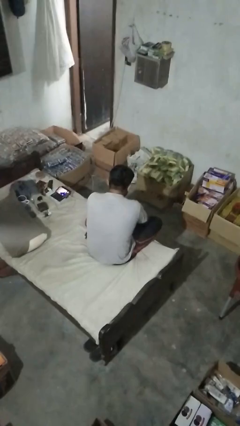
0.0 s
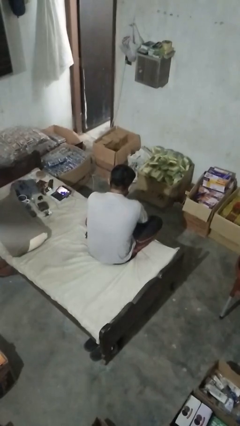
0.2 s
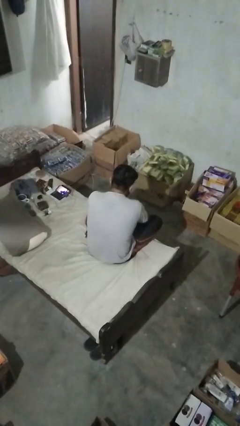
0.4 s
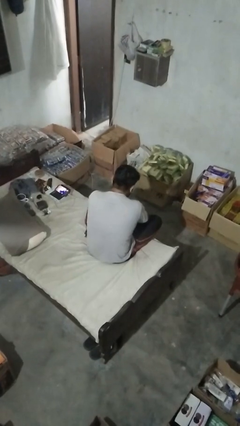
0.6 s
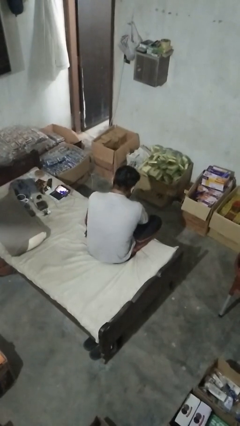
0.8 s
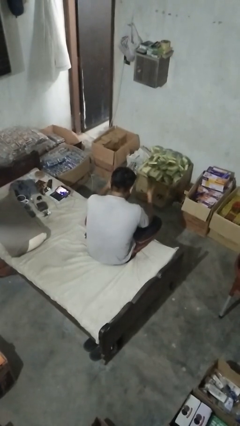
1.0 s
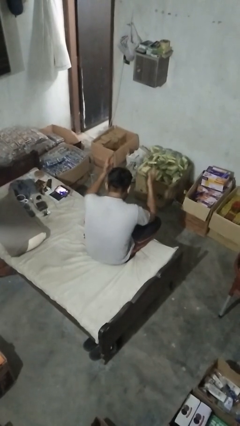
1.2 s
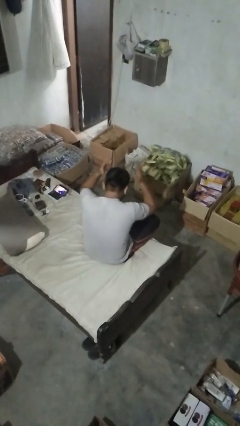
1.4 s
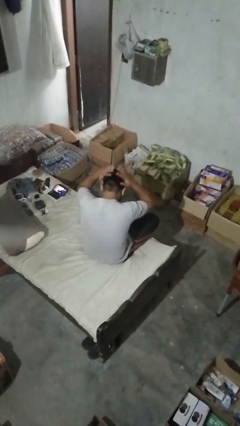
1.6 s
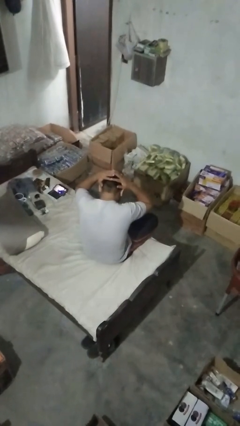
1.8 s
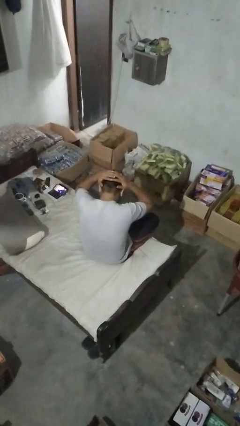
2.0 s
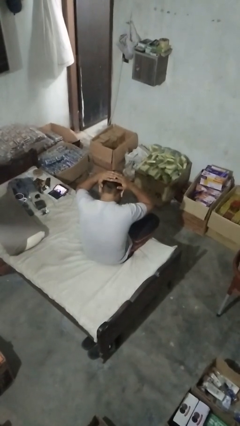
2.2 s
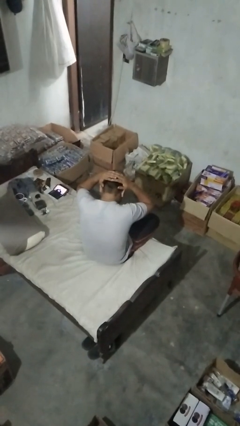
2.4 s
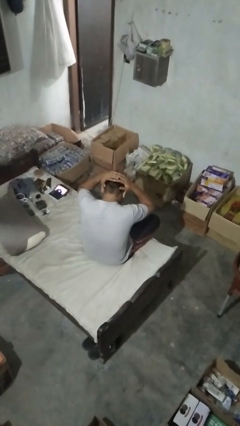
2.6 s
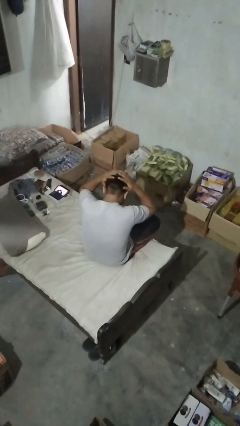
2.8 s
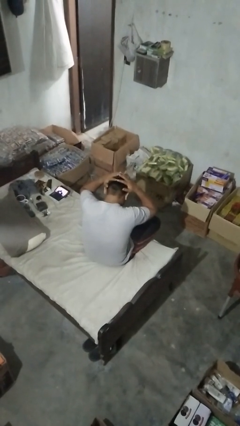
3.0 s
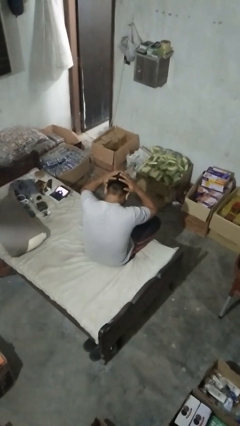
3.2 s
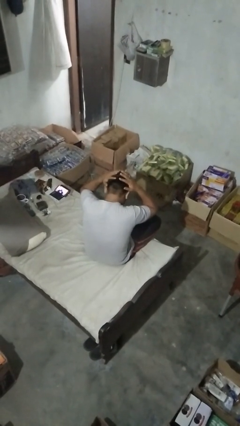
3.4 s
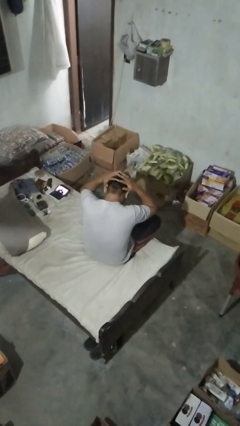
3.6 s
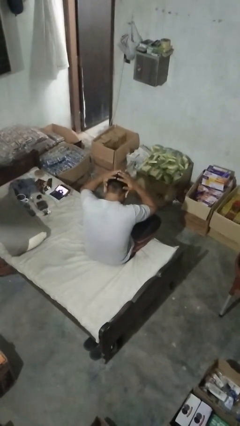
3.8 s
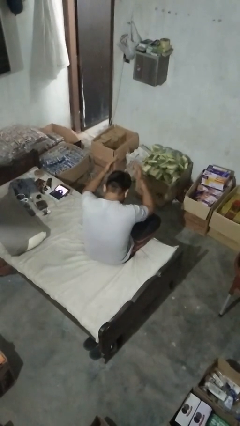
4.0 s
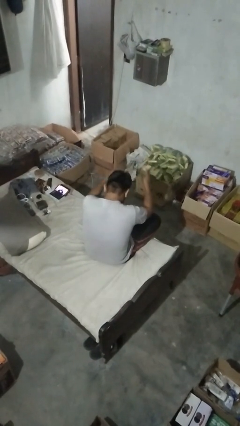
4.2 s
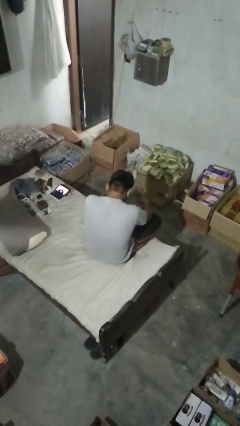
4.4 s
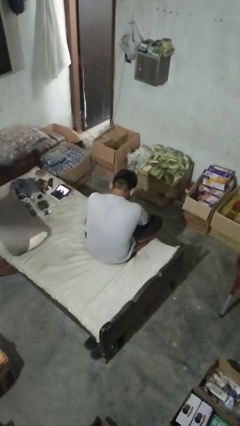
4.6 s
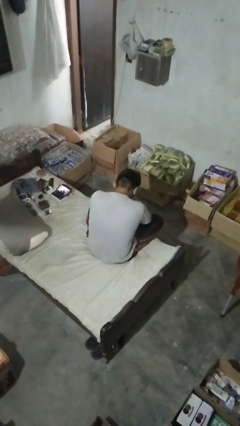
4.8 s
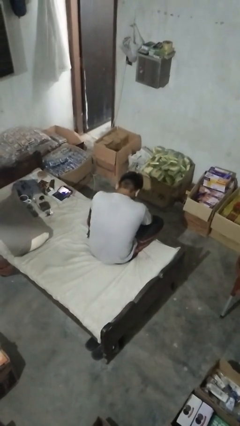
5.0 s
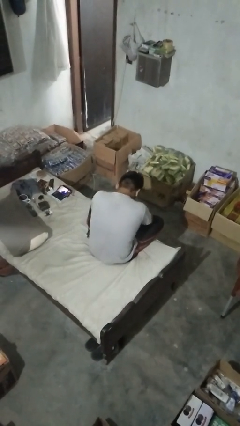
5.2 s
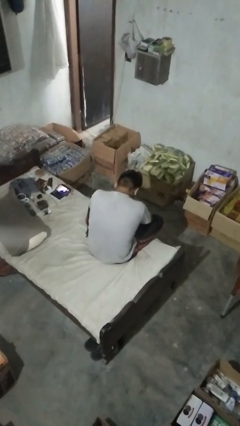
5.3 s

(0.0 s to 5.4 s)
person pats head

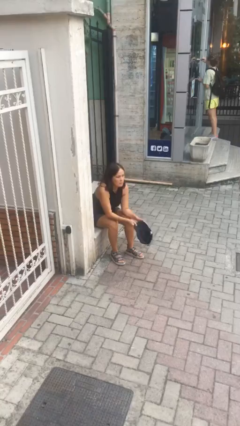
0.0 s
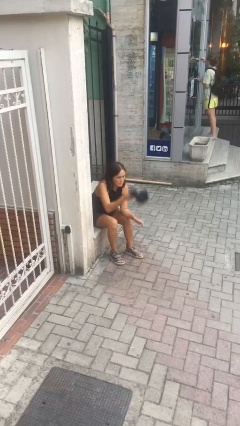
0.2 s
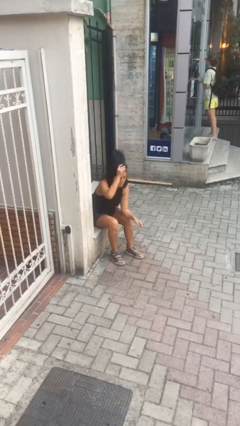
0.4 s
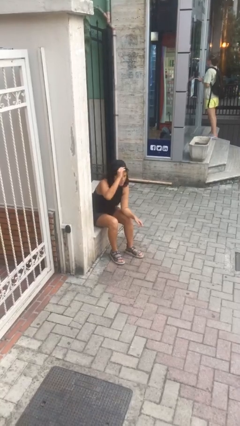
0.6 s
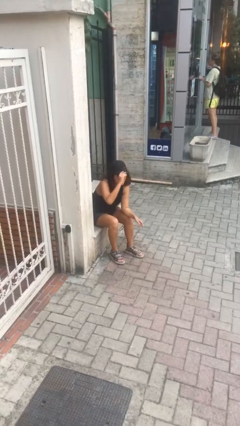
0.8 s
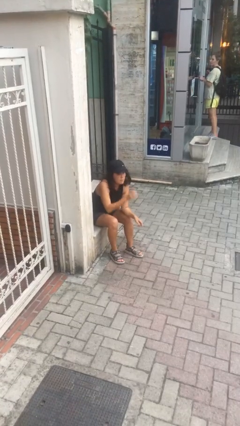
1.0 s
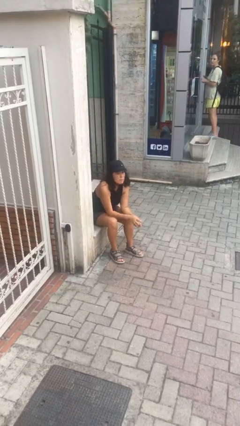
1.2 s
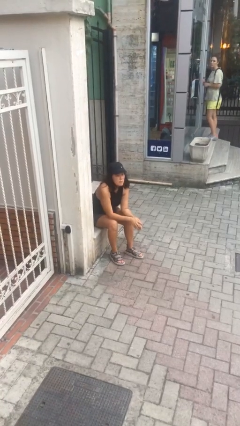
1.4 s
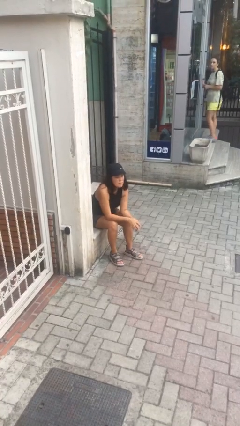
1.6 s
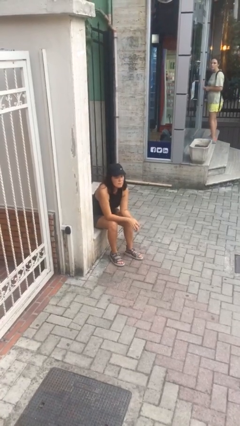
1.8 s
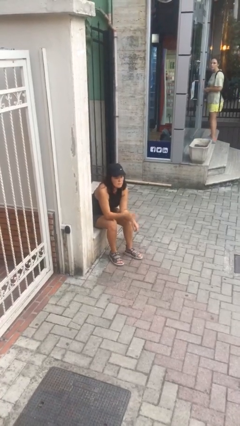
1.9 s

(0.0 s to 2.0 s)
person puts on hat

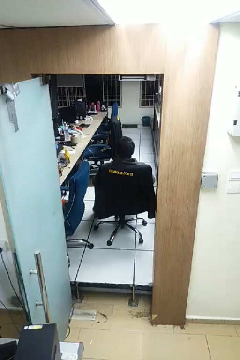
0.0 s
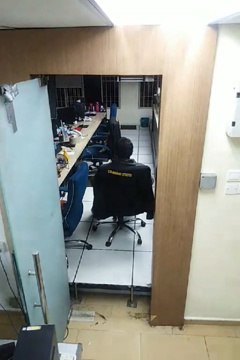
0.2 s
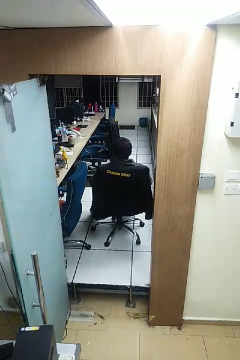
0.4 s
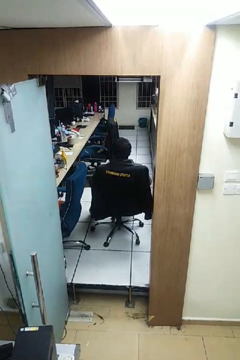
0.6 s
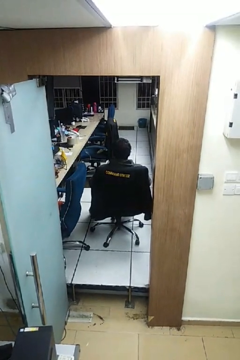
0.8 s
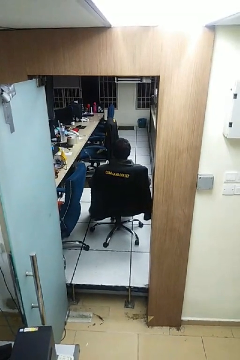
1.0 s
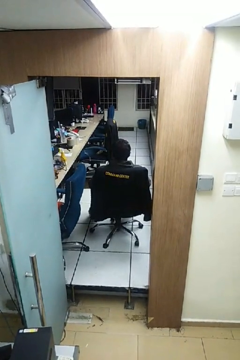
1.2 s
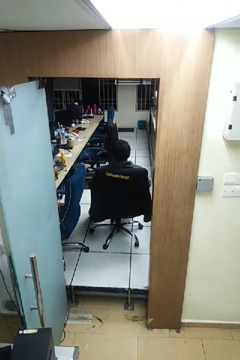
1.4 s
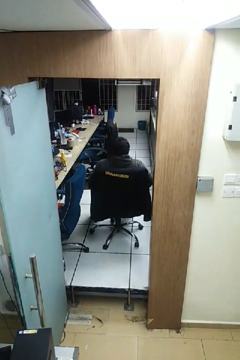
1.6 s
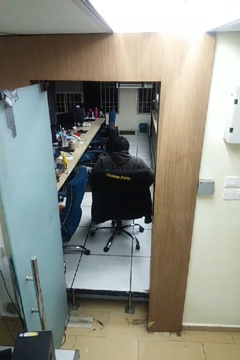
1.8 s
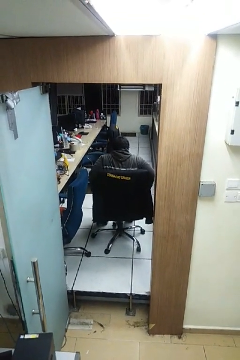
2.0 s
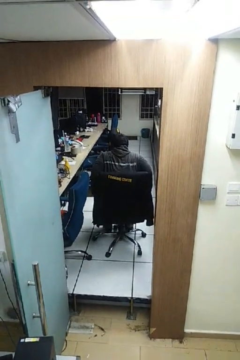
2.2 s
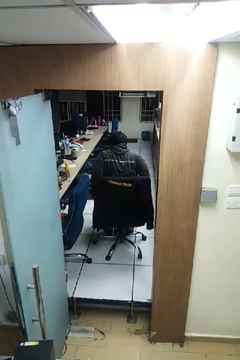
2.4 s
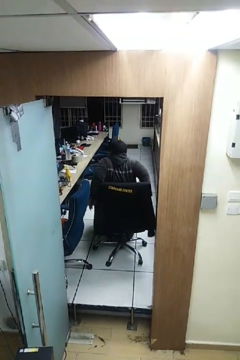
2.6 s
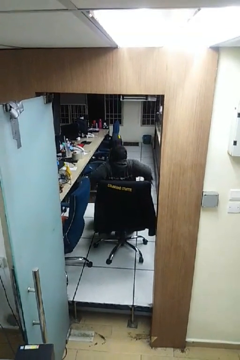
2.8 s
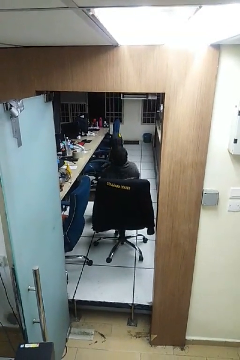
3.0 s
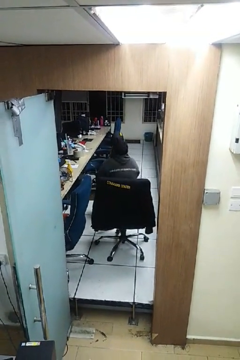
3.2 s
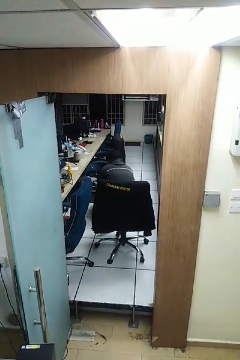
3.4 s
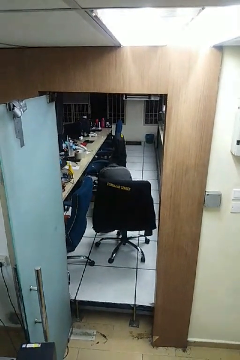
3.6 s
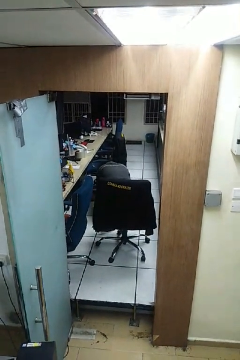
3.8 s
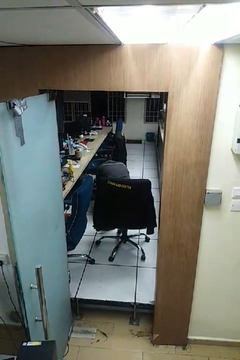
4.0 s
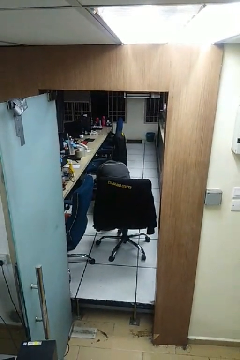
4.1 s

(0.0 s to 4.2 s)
person falls from chair

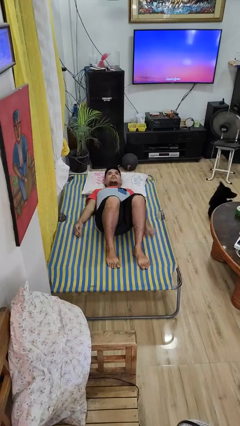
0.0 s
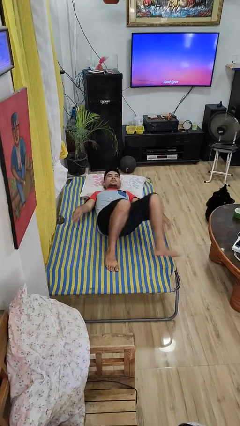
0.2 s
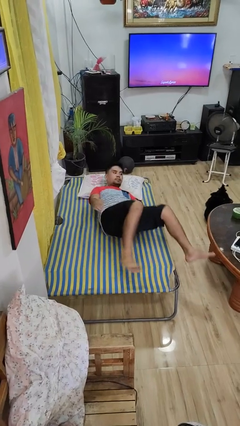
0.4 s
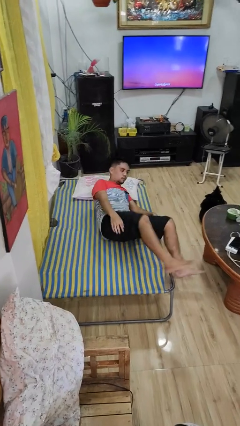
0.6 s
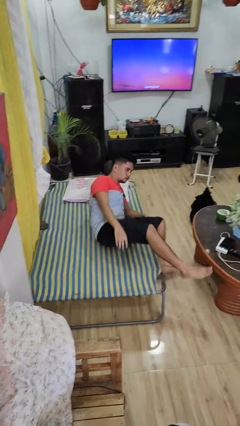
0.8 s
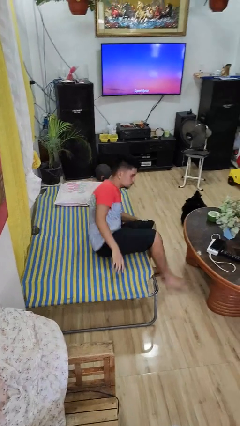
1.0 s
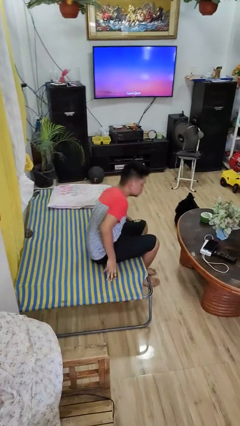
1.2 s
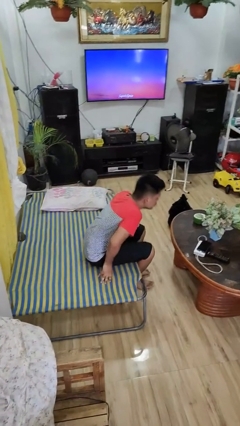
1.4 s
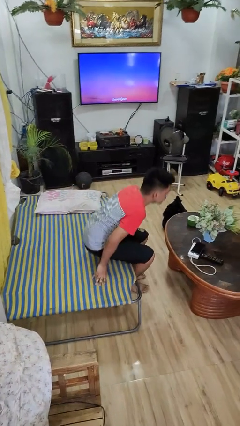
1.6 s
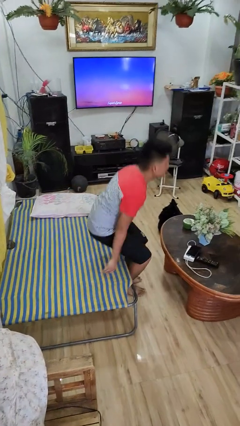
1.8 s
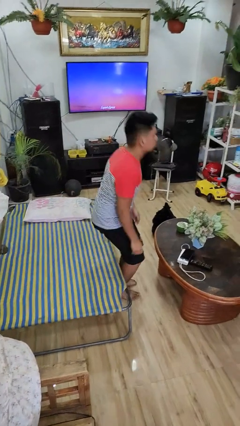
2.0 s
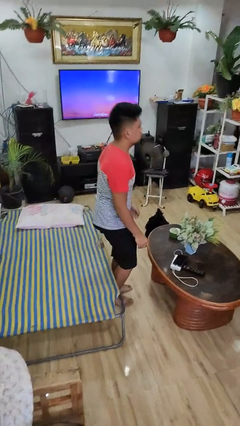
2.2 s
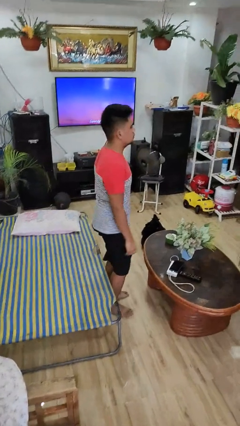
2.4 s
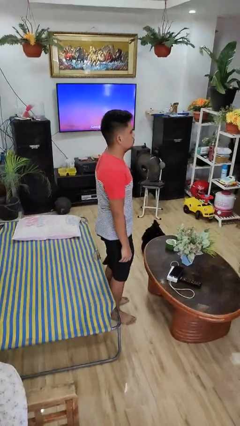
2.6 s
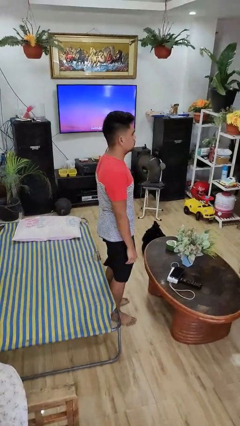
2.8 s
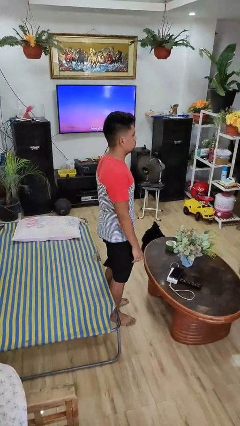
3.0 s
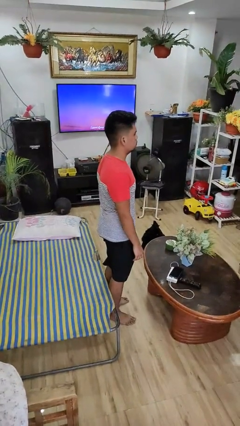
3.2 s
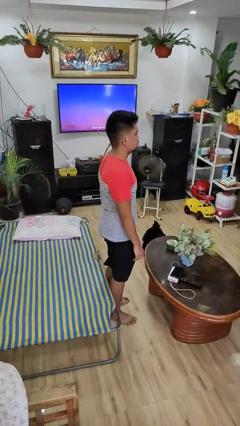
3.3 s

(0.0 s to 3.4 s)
person stands up

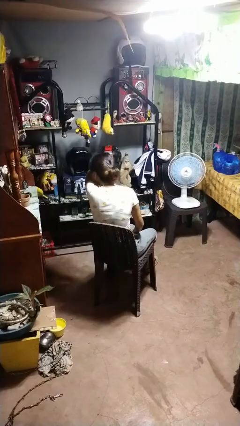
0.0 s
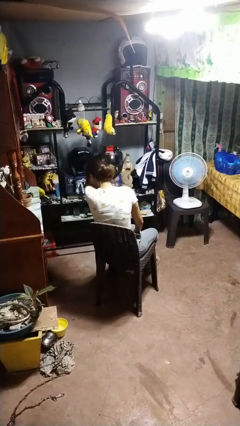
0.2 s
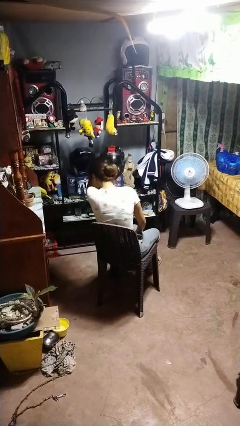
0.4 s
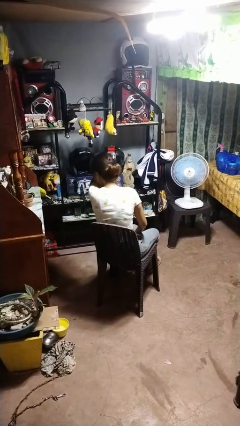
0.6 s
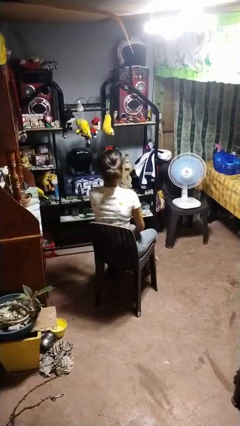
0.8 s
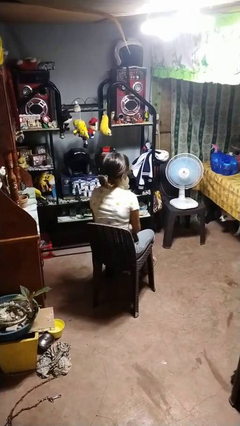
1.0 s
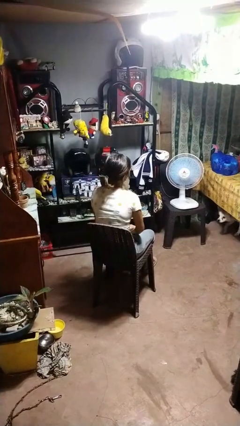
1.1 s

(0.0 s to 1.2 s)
person sneezes into arm

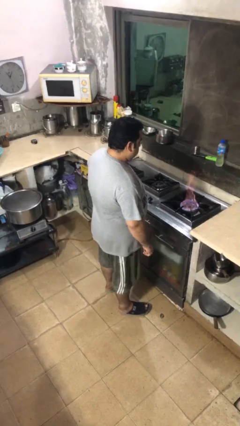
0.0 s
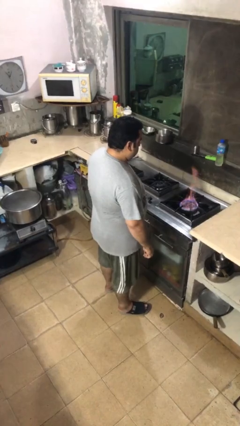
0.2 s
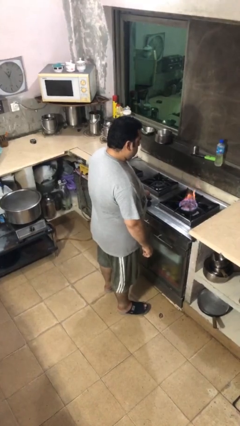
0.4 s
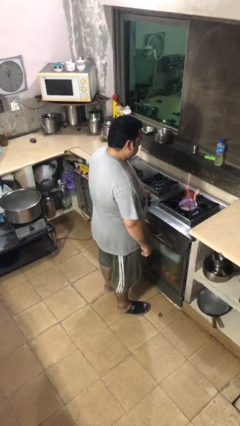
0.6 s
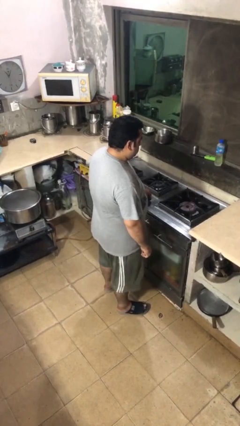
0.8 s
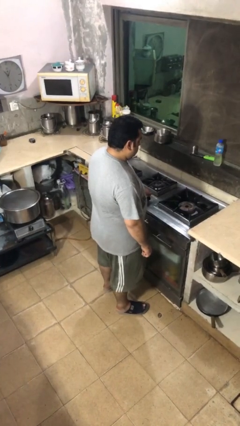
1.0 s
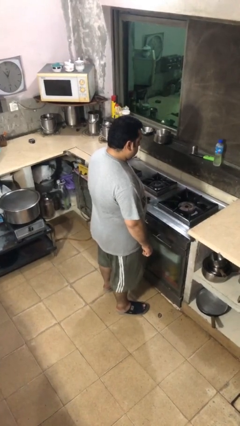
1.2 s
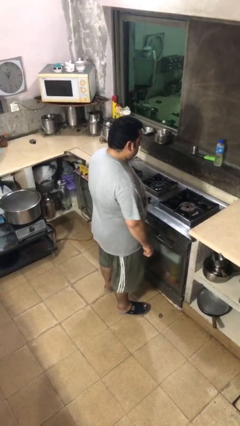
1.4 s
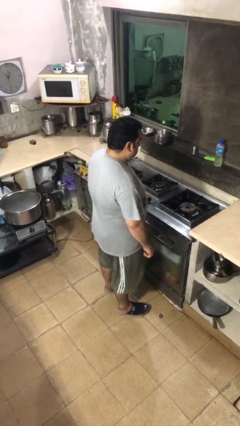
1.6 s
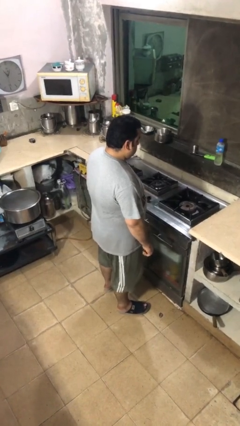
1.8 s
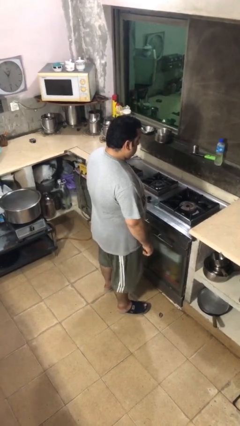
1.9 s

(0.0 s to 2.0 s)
person turns off stovetop

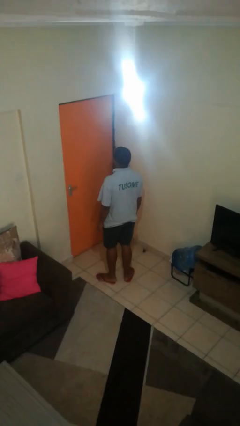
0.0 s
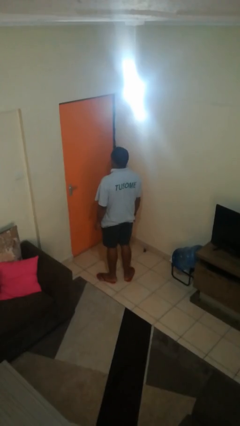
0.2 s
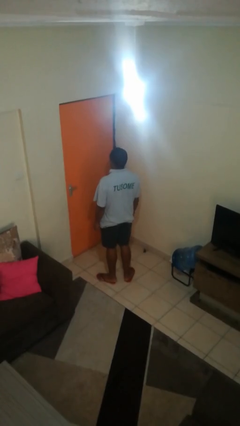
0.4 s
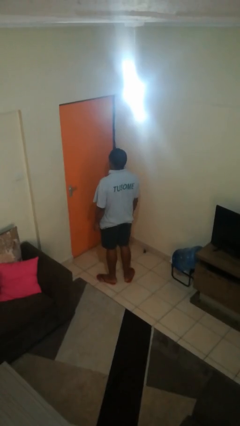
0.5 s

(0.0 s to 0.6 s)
person gestures number three
